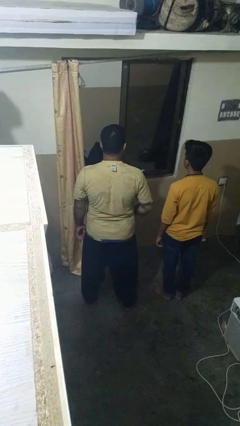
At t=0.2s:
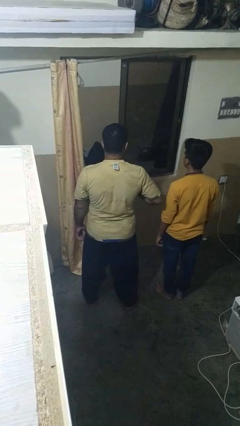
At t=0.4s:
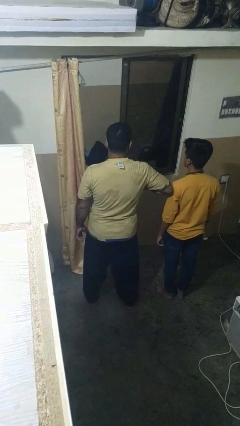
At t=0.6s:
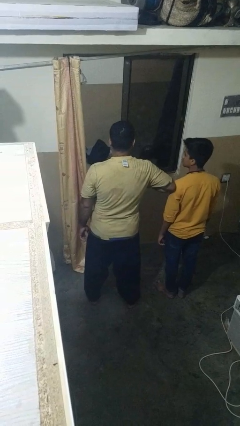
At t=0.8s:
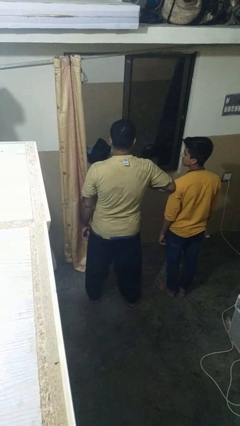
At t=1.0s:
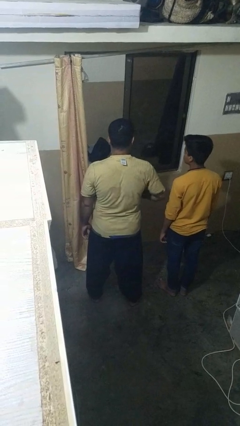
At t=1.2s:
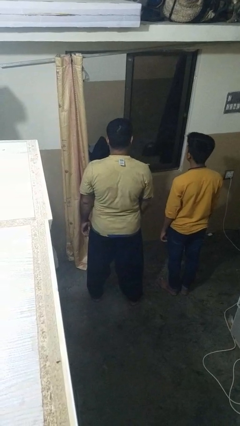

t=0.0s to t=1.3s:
person nudges person with elbow

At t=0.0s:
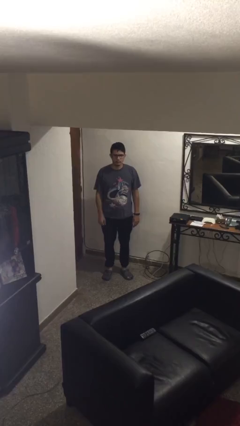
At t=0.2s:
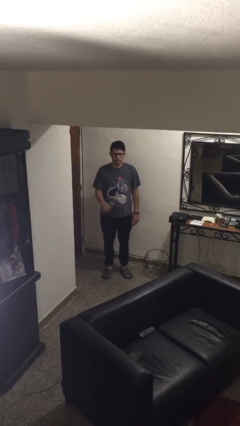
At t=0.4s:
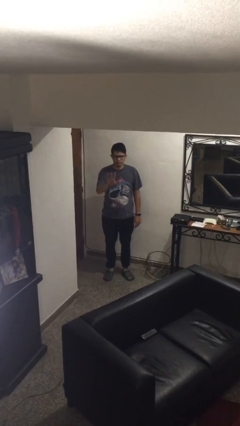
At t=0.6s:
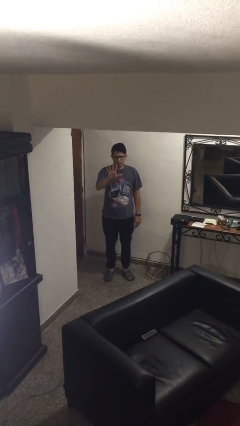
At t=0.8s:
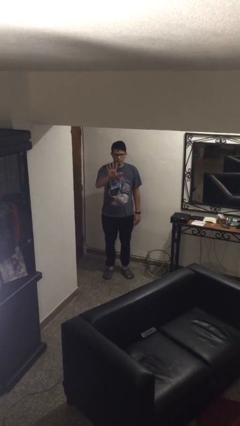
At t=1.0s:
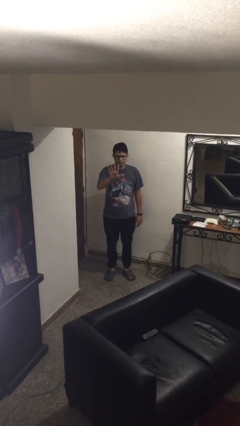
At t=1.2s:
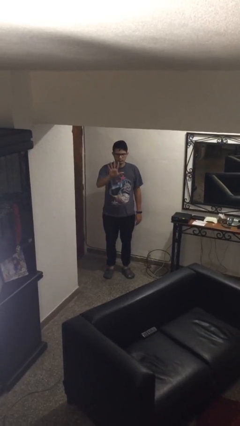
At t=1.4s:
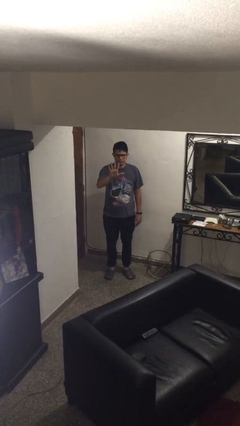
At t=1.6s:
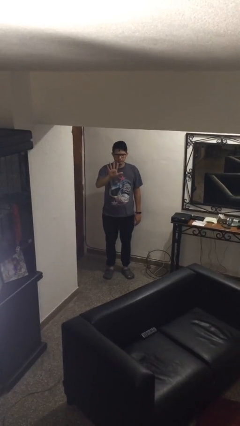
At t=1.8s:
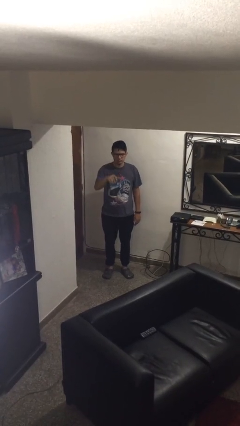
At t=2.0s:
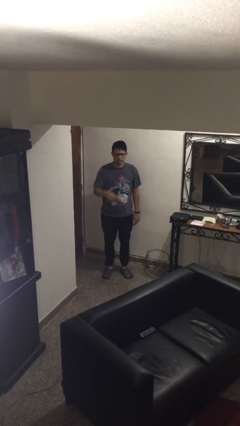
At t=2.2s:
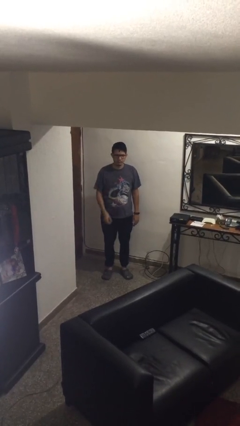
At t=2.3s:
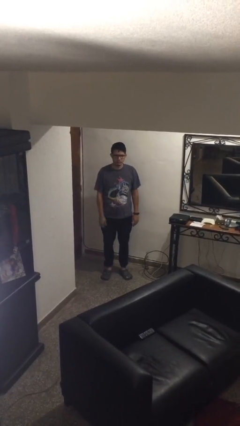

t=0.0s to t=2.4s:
person gestures number five

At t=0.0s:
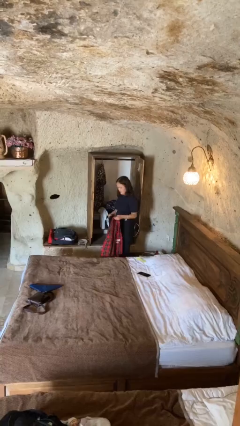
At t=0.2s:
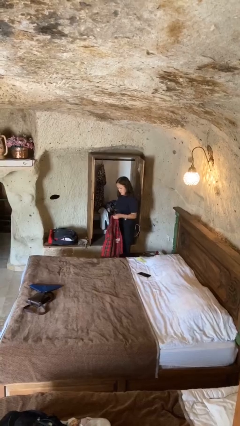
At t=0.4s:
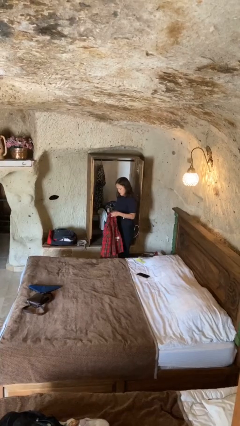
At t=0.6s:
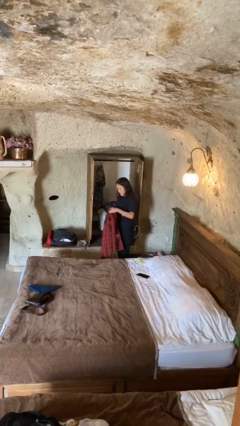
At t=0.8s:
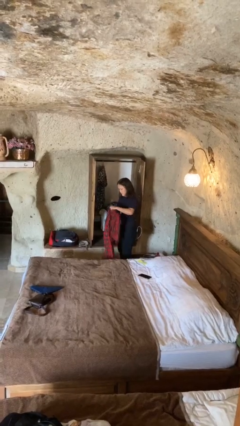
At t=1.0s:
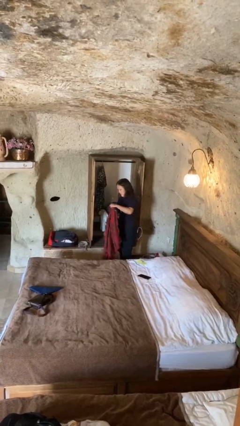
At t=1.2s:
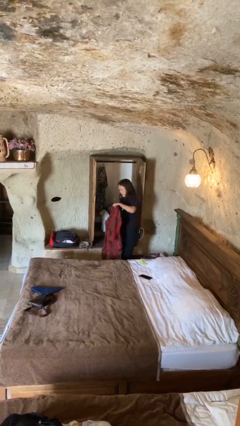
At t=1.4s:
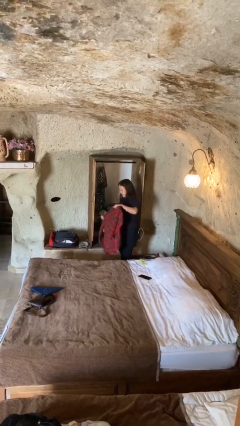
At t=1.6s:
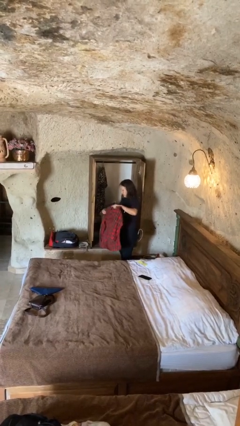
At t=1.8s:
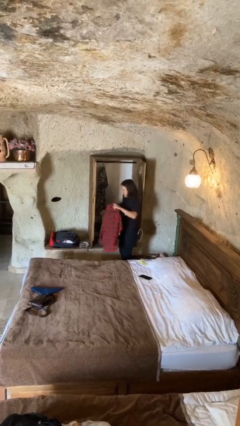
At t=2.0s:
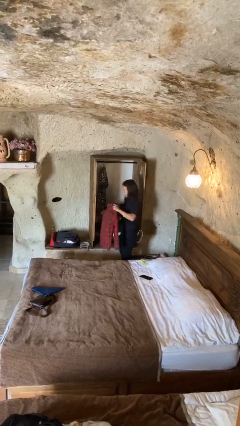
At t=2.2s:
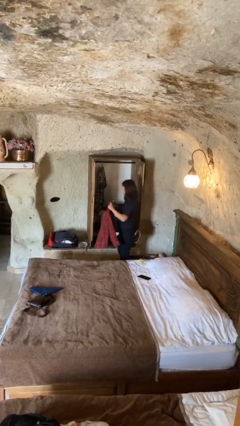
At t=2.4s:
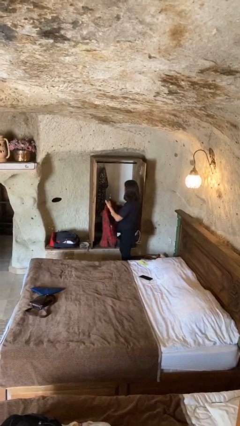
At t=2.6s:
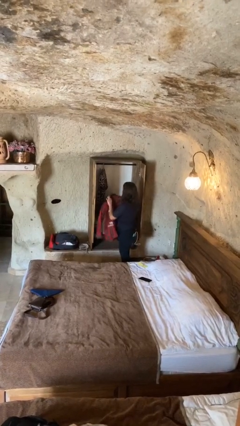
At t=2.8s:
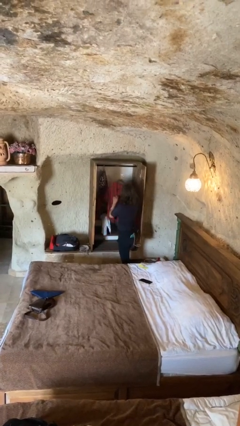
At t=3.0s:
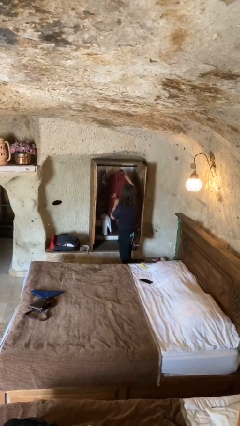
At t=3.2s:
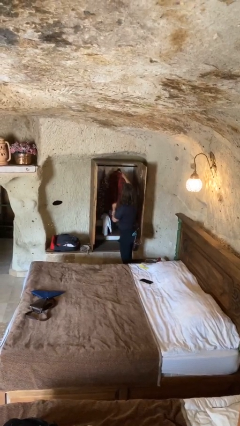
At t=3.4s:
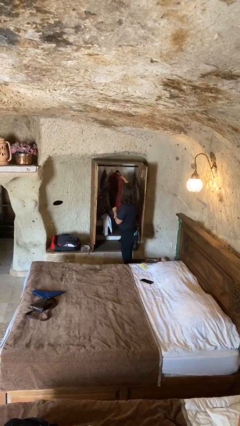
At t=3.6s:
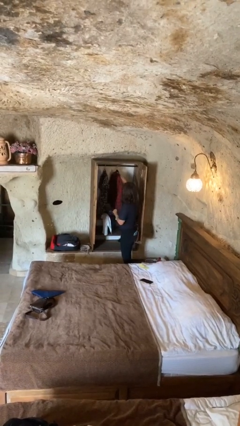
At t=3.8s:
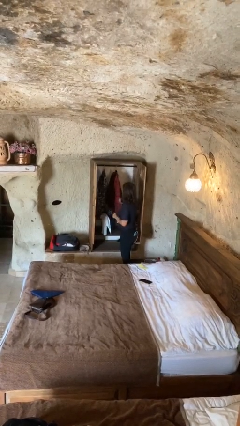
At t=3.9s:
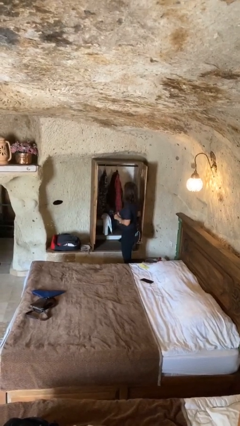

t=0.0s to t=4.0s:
person puts clothes into closet

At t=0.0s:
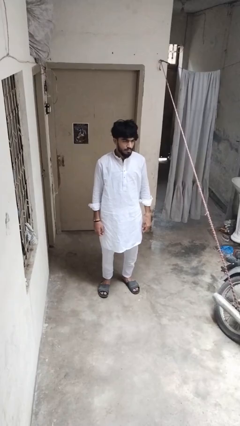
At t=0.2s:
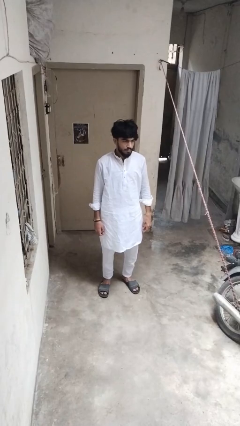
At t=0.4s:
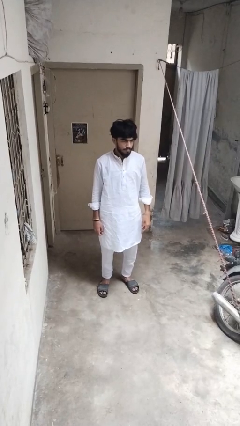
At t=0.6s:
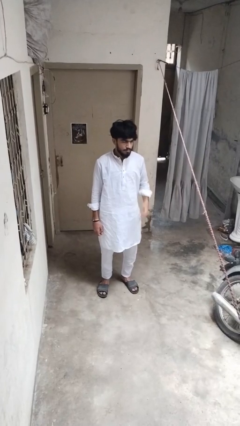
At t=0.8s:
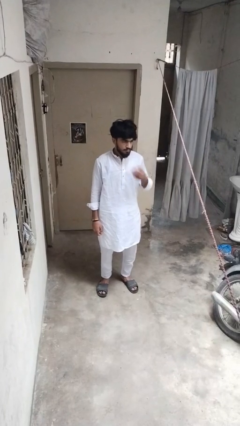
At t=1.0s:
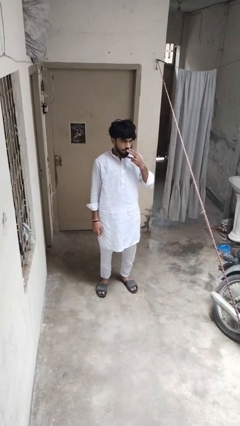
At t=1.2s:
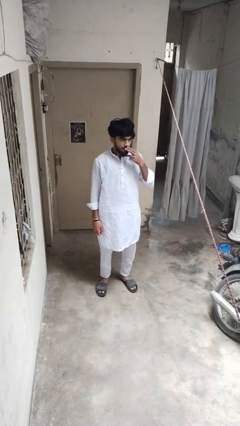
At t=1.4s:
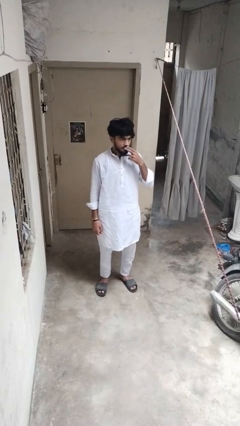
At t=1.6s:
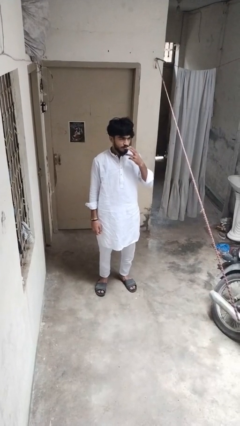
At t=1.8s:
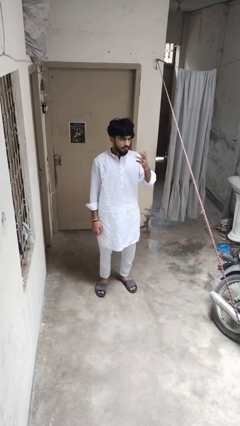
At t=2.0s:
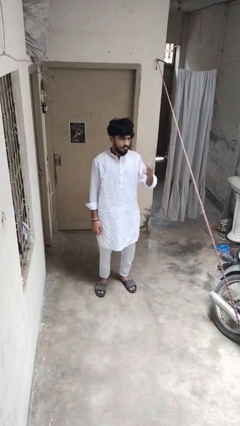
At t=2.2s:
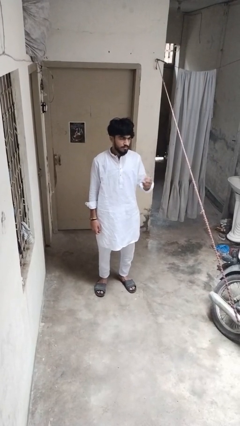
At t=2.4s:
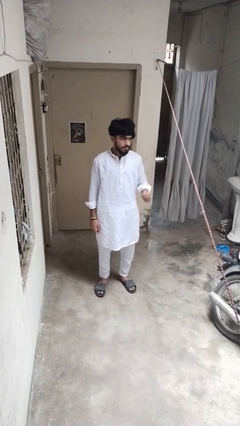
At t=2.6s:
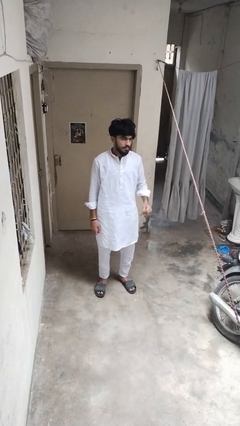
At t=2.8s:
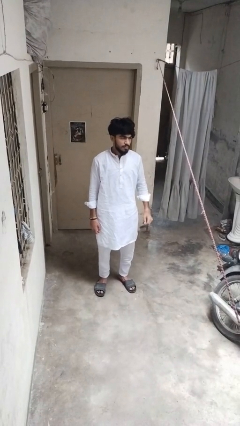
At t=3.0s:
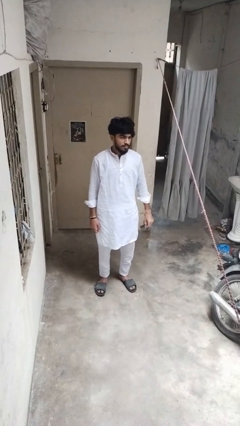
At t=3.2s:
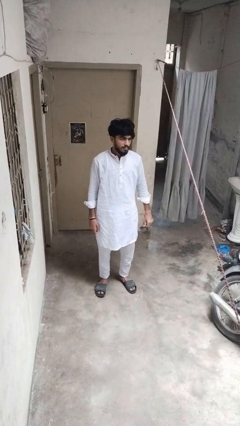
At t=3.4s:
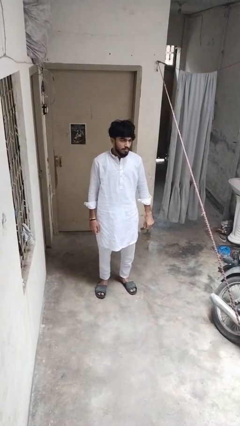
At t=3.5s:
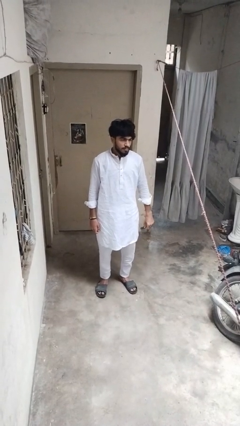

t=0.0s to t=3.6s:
person gestures blow kiss

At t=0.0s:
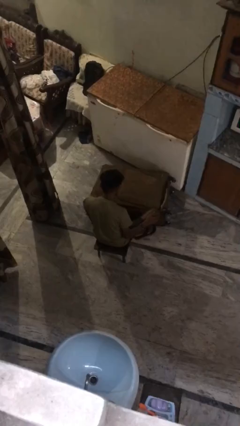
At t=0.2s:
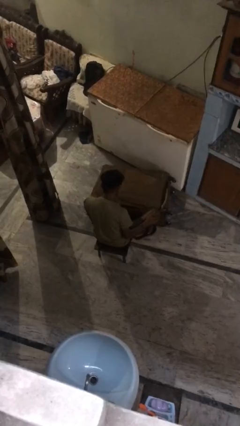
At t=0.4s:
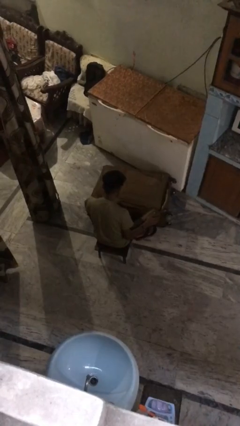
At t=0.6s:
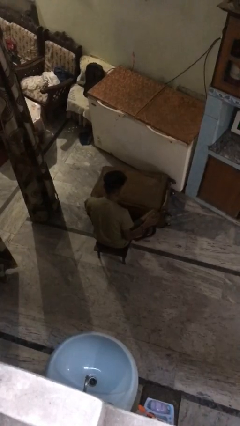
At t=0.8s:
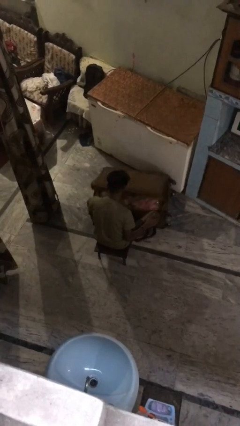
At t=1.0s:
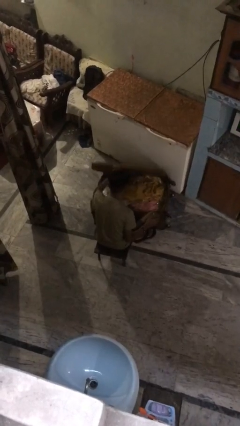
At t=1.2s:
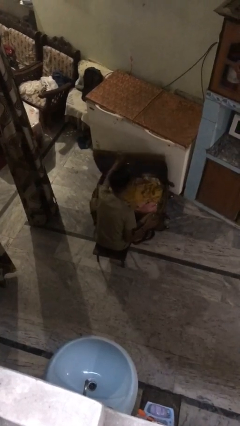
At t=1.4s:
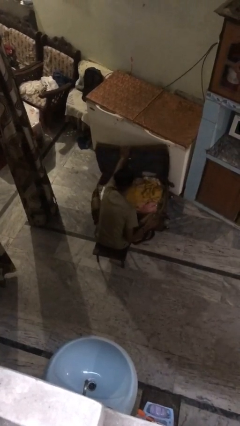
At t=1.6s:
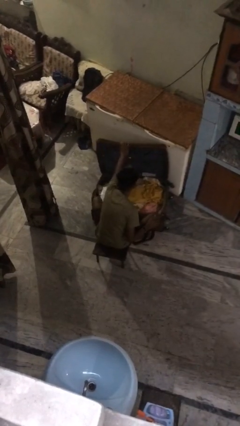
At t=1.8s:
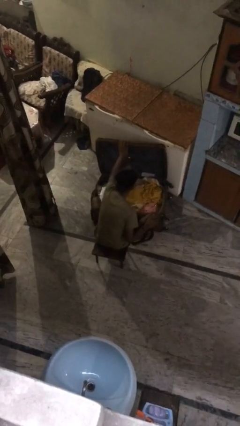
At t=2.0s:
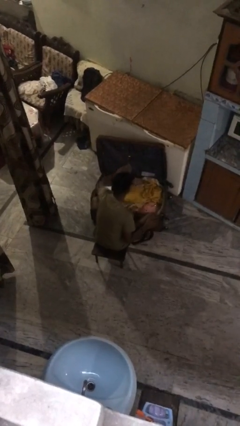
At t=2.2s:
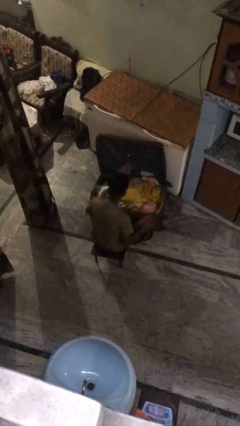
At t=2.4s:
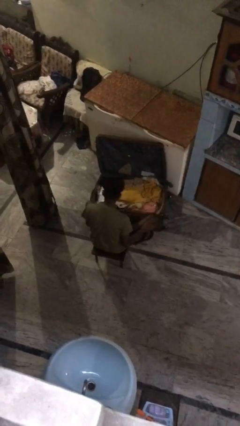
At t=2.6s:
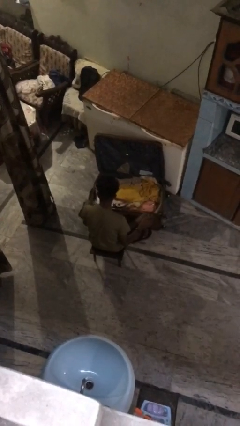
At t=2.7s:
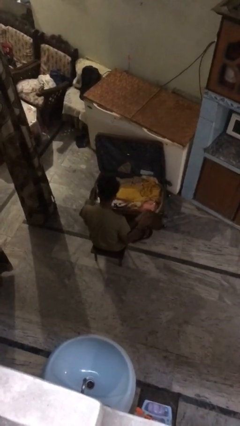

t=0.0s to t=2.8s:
person opens suitcase

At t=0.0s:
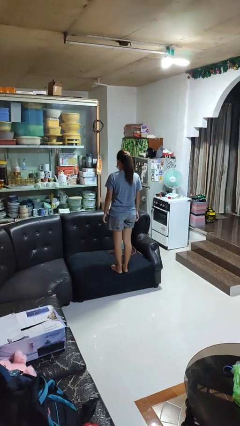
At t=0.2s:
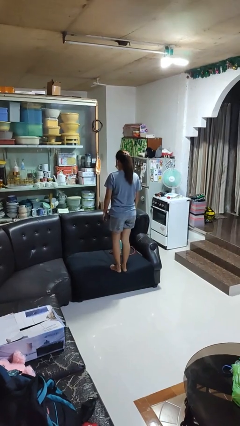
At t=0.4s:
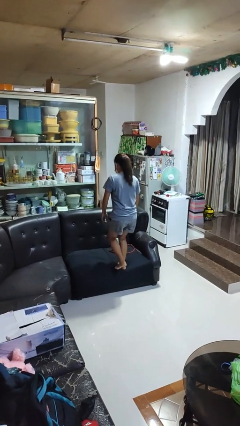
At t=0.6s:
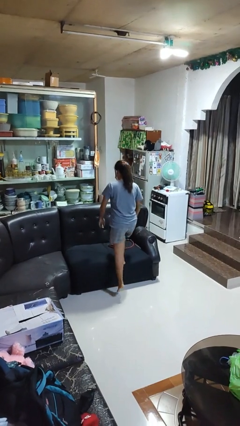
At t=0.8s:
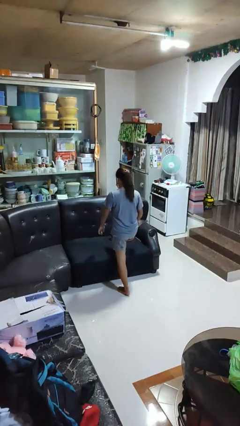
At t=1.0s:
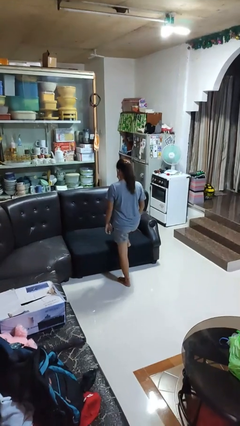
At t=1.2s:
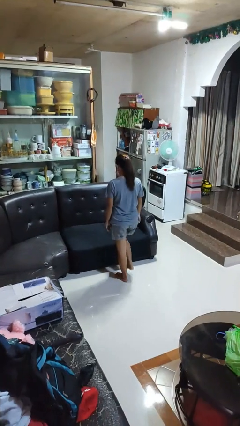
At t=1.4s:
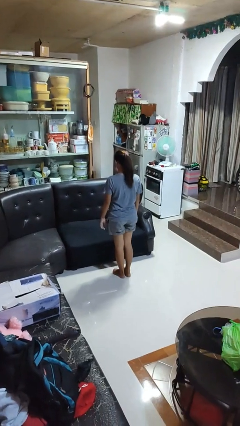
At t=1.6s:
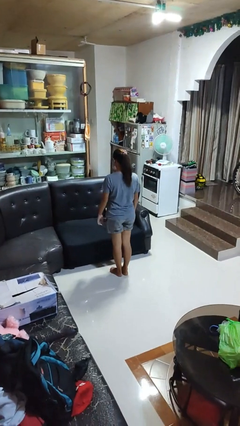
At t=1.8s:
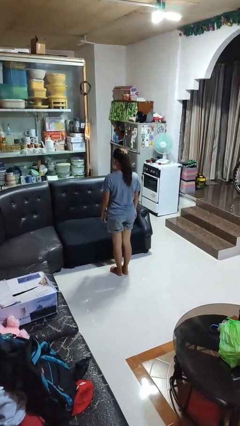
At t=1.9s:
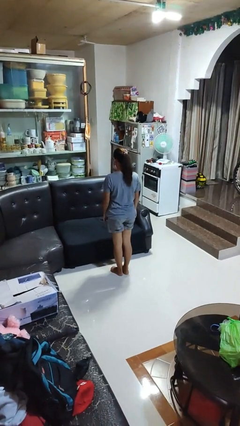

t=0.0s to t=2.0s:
person climbs off couch

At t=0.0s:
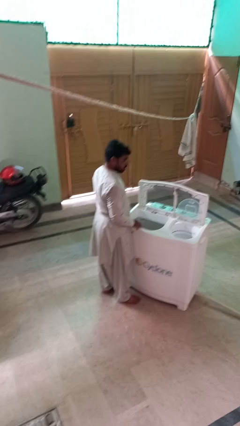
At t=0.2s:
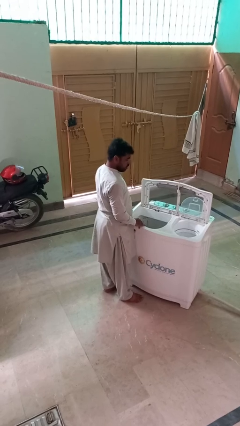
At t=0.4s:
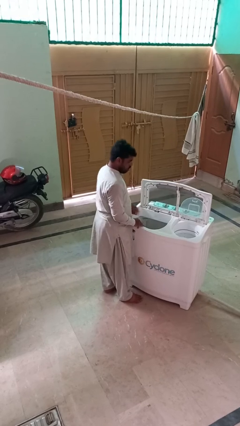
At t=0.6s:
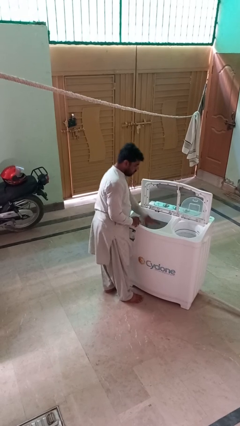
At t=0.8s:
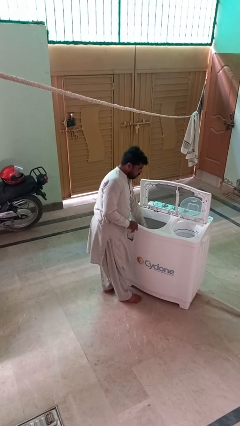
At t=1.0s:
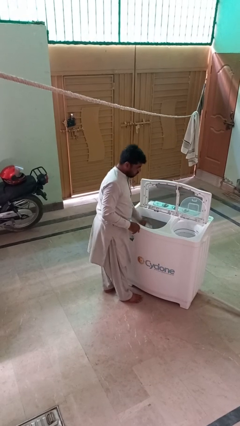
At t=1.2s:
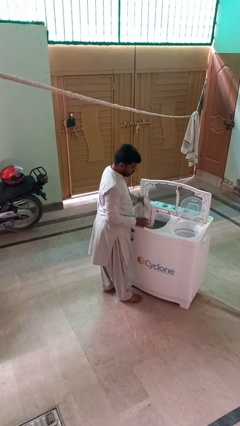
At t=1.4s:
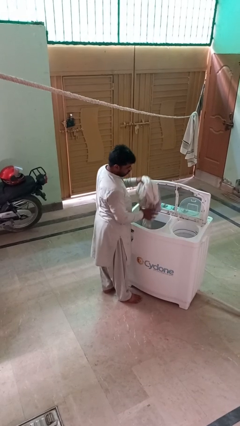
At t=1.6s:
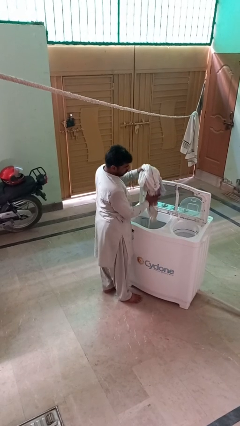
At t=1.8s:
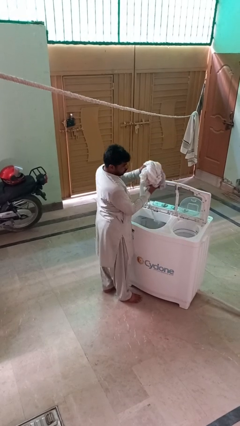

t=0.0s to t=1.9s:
person unloads clotheswasher
